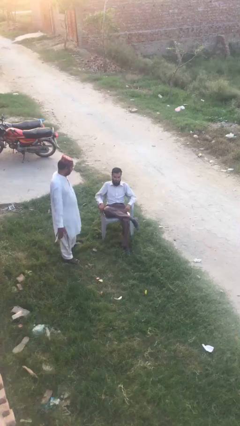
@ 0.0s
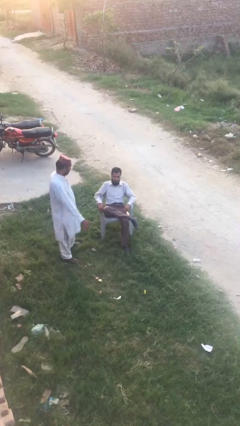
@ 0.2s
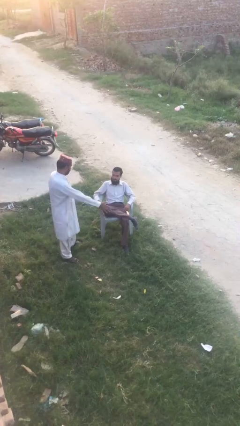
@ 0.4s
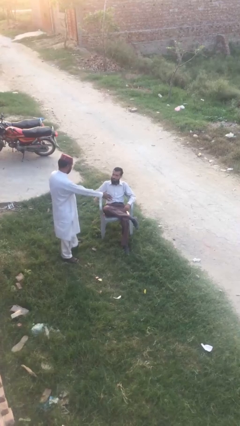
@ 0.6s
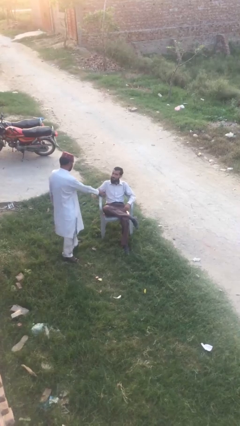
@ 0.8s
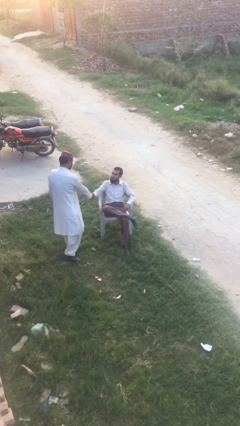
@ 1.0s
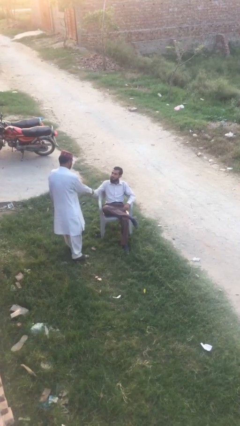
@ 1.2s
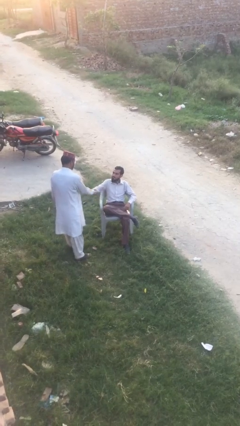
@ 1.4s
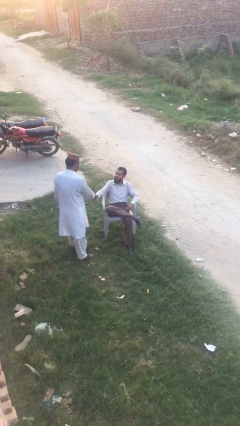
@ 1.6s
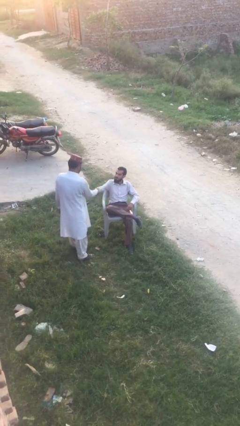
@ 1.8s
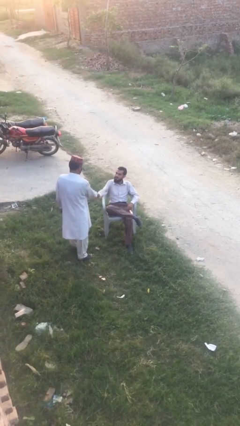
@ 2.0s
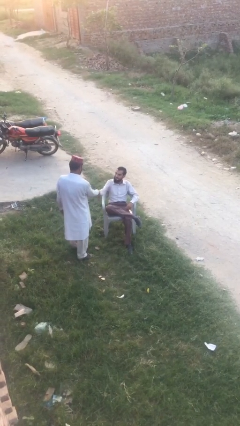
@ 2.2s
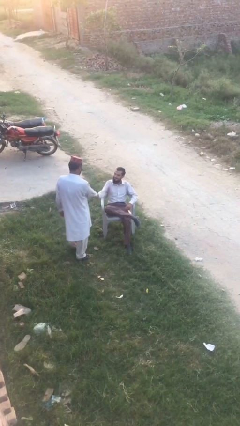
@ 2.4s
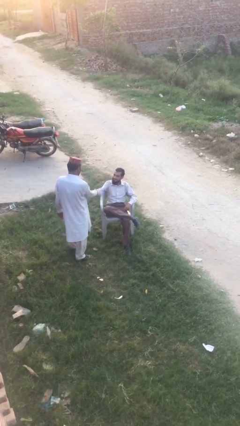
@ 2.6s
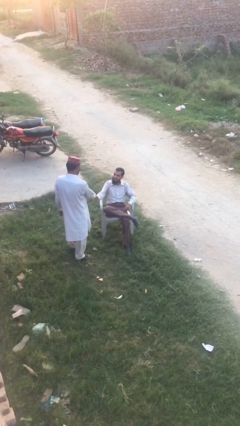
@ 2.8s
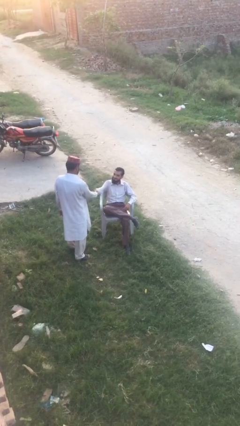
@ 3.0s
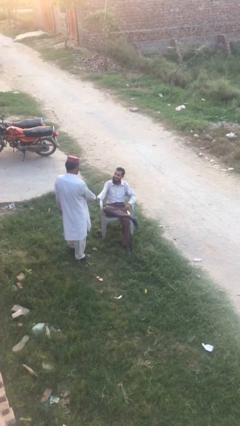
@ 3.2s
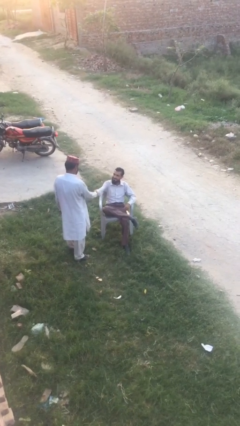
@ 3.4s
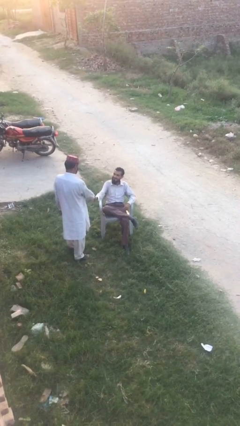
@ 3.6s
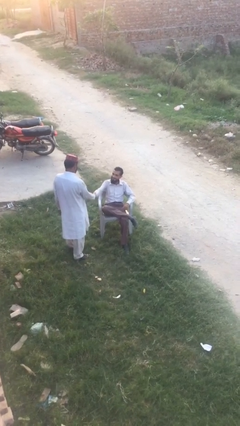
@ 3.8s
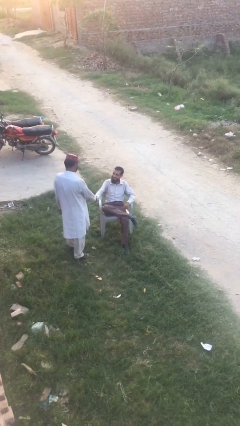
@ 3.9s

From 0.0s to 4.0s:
person shakes hand

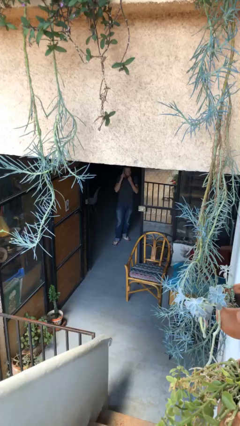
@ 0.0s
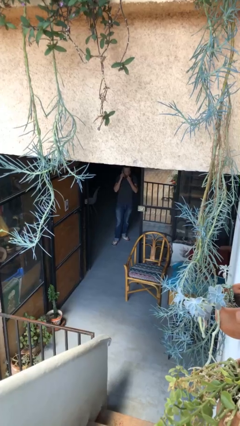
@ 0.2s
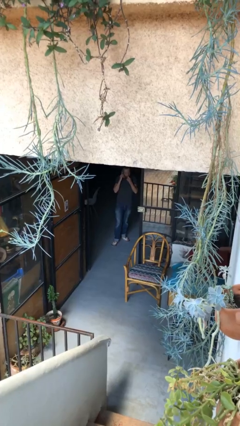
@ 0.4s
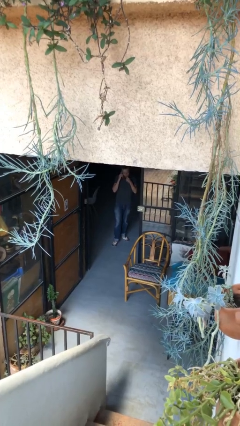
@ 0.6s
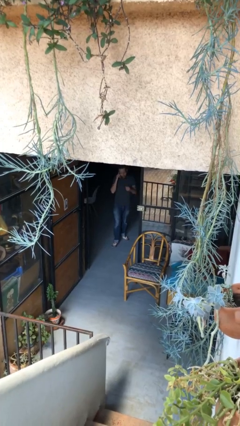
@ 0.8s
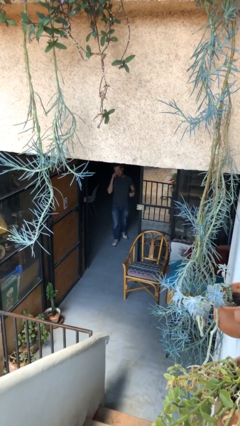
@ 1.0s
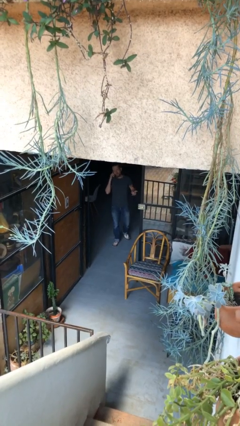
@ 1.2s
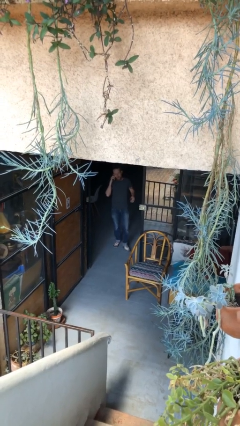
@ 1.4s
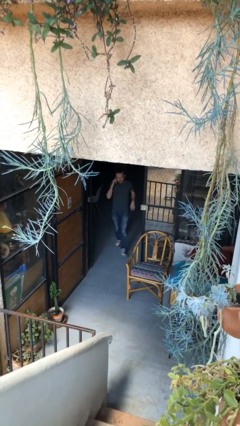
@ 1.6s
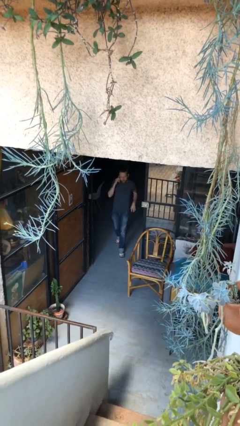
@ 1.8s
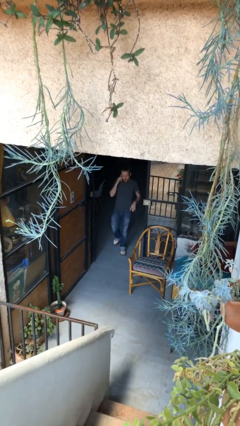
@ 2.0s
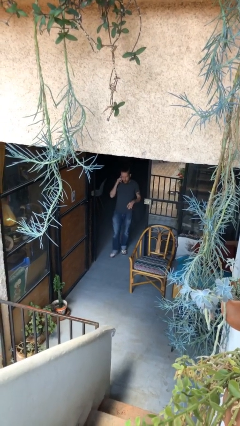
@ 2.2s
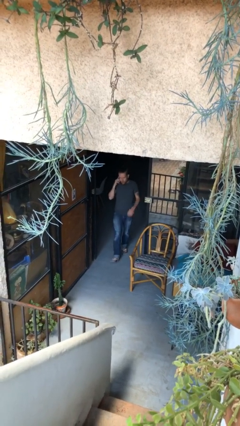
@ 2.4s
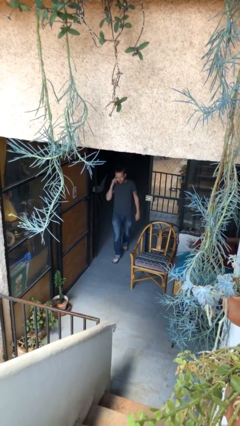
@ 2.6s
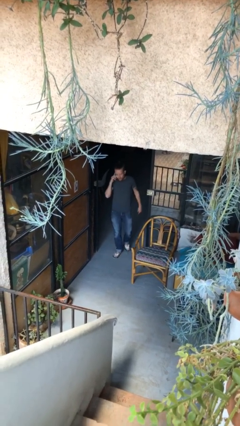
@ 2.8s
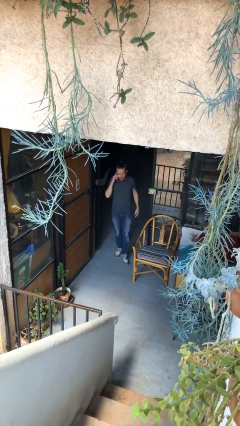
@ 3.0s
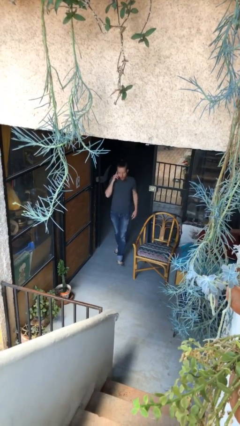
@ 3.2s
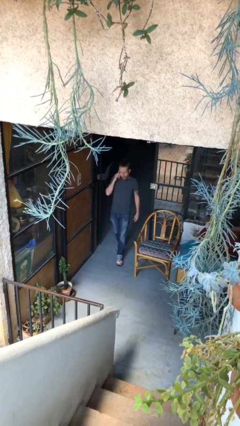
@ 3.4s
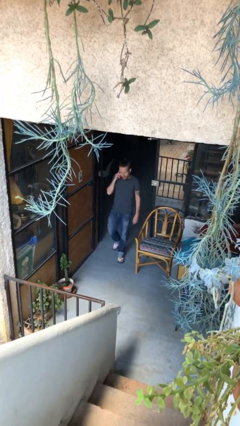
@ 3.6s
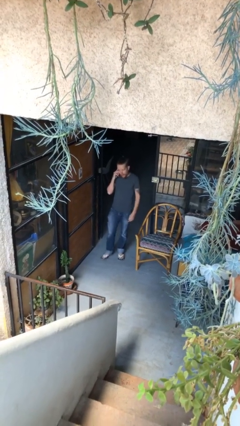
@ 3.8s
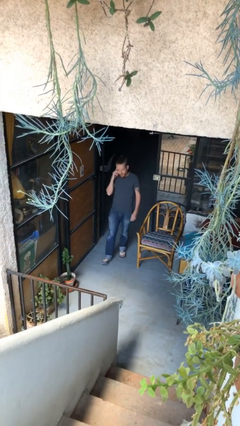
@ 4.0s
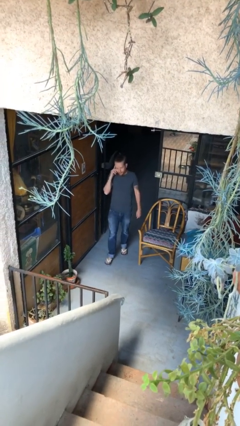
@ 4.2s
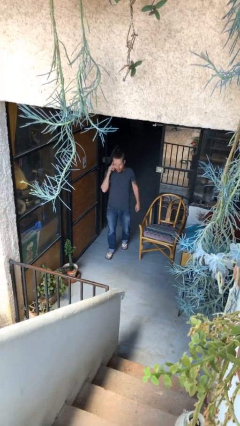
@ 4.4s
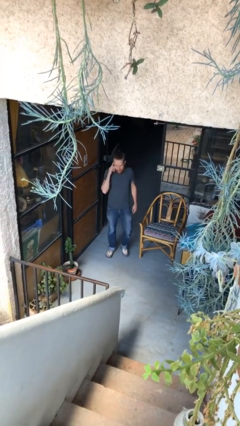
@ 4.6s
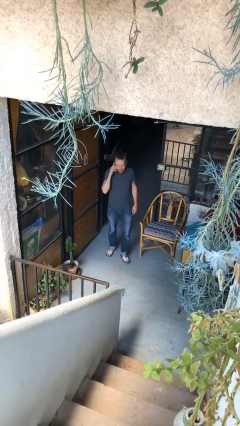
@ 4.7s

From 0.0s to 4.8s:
person enters scene through structure

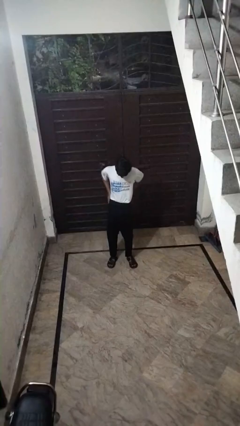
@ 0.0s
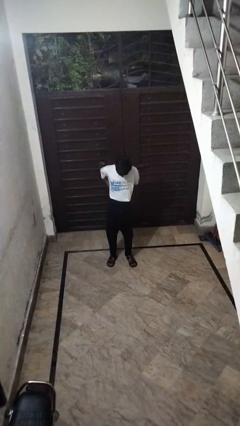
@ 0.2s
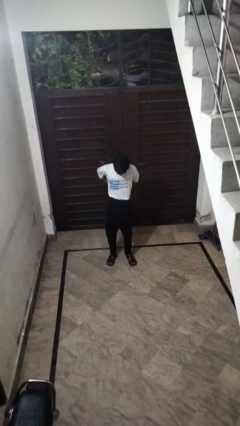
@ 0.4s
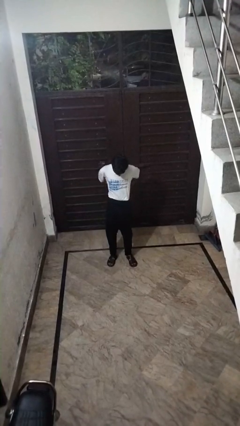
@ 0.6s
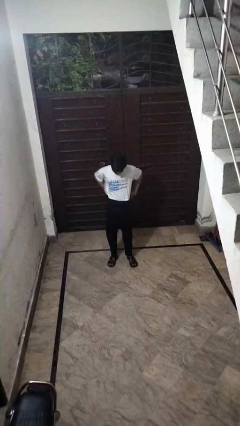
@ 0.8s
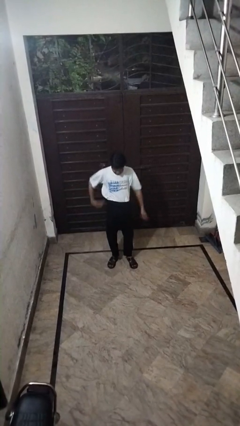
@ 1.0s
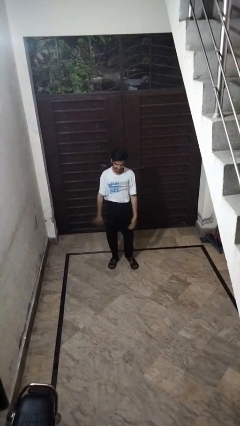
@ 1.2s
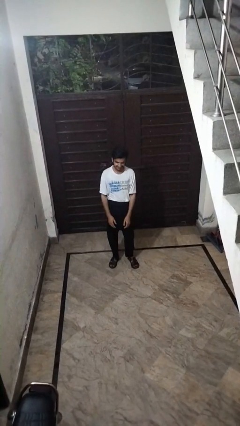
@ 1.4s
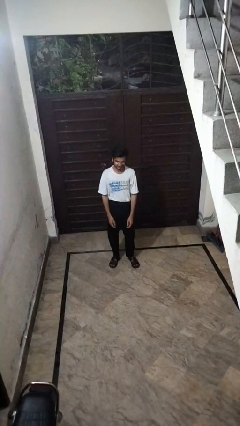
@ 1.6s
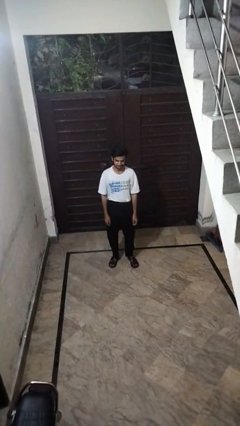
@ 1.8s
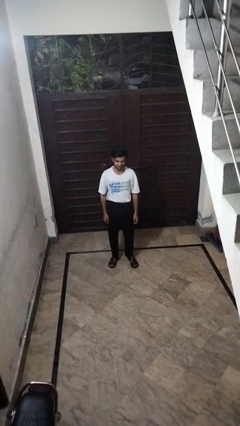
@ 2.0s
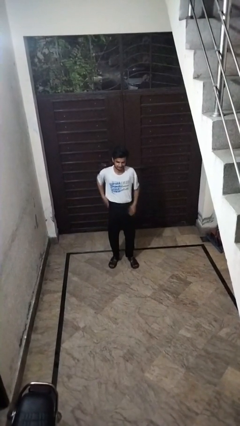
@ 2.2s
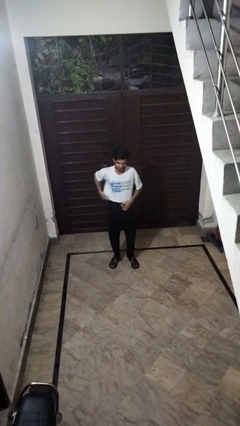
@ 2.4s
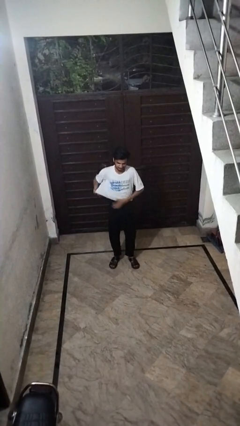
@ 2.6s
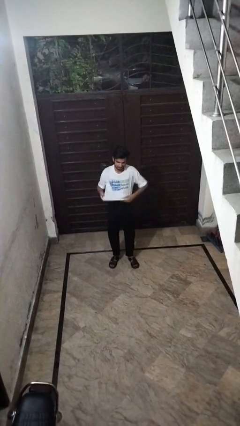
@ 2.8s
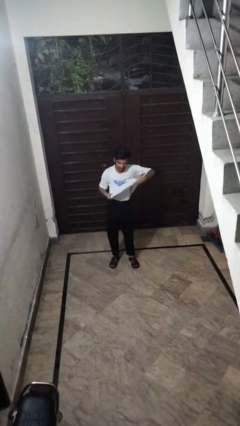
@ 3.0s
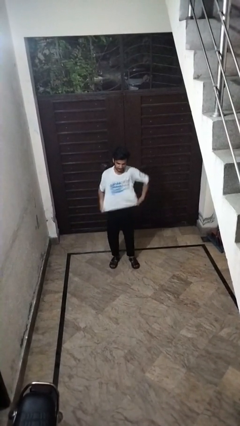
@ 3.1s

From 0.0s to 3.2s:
person unlocks door with keys

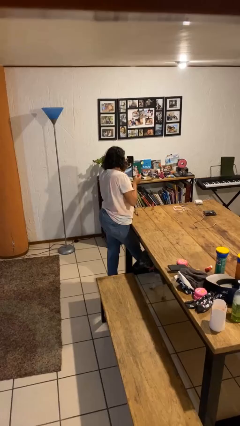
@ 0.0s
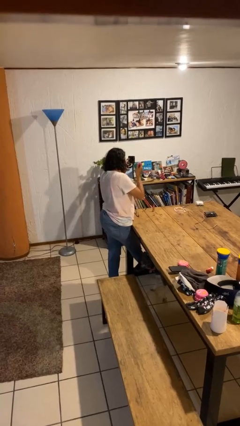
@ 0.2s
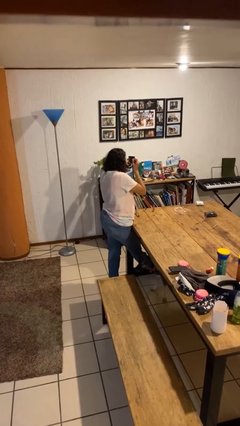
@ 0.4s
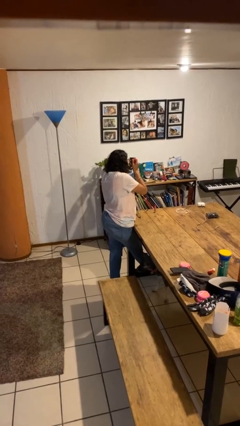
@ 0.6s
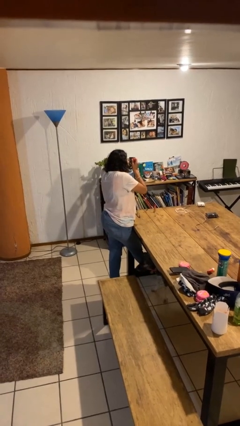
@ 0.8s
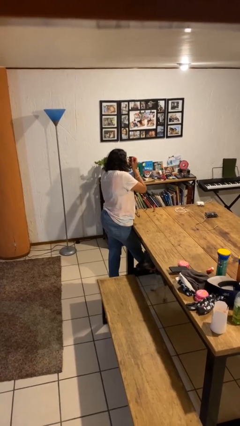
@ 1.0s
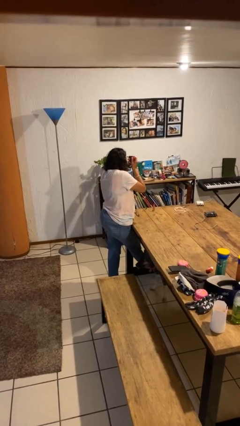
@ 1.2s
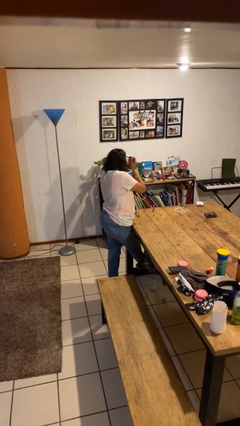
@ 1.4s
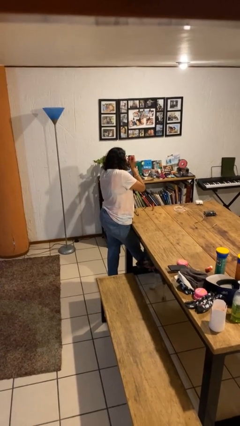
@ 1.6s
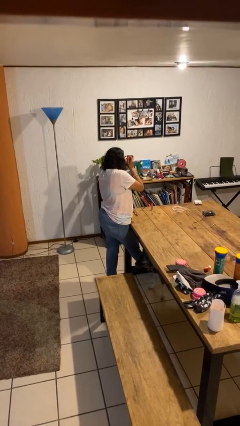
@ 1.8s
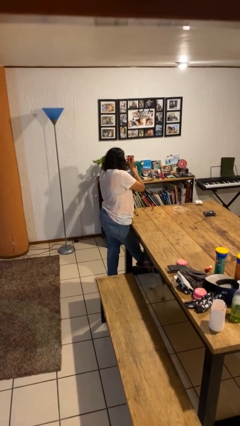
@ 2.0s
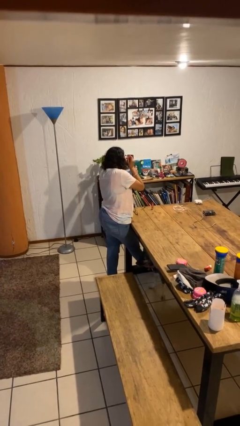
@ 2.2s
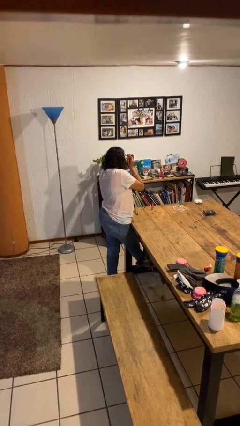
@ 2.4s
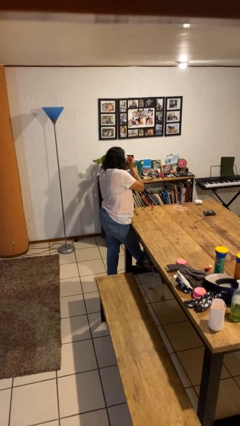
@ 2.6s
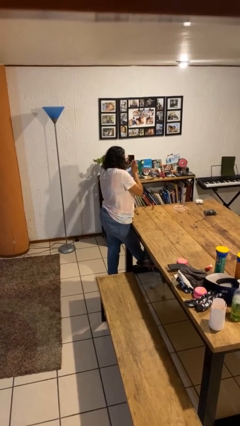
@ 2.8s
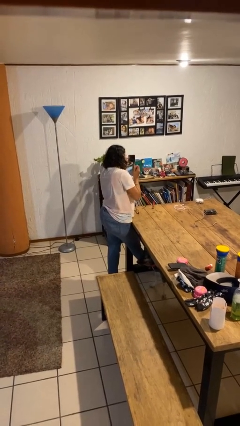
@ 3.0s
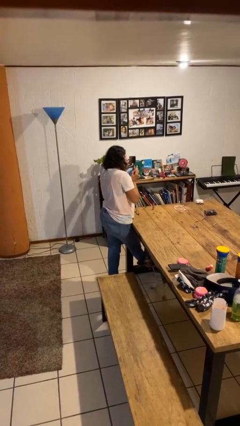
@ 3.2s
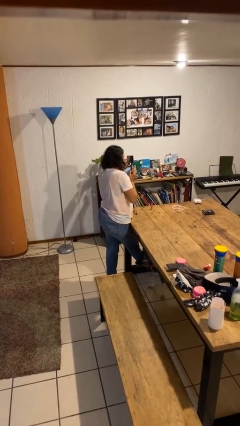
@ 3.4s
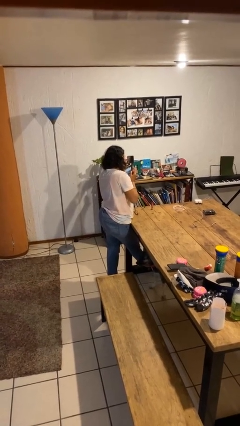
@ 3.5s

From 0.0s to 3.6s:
person applies eye makeup

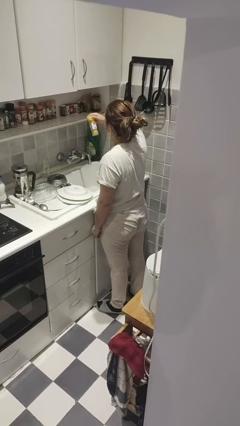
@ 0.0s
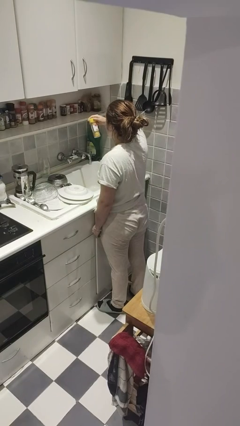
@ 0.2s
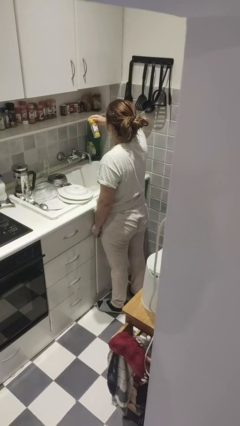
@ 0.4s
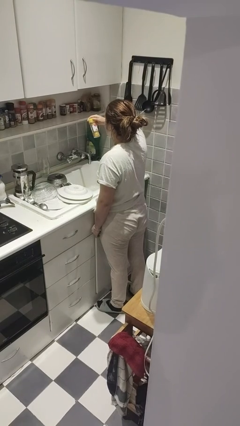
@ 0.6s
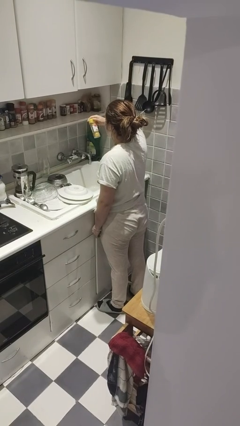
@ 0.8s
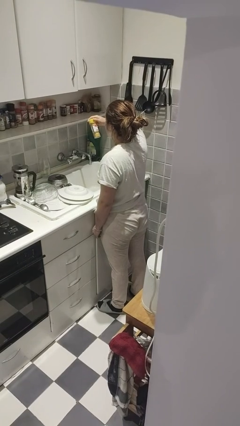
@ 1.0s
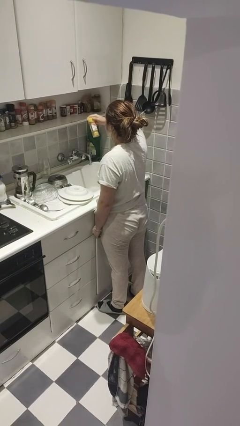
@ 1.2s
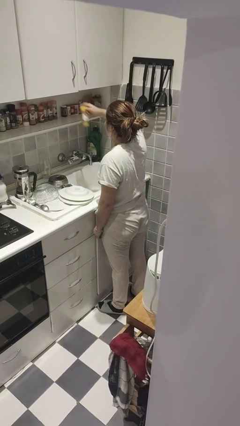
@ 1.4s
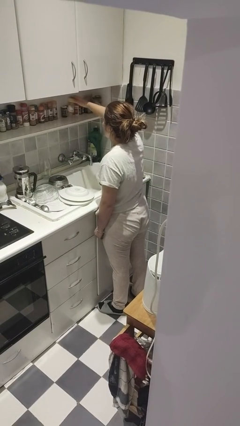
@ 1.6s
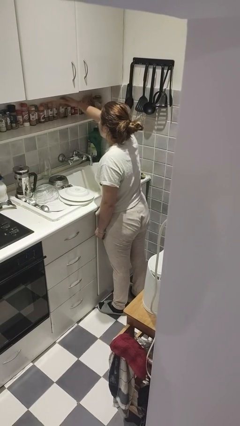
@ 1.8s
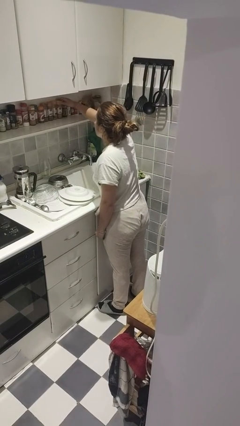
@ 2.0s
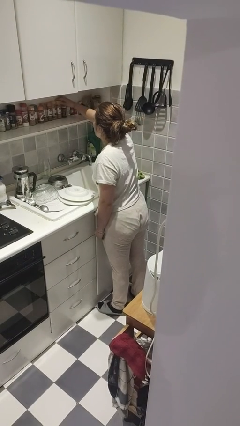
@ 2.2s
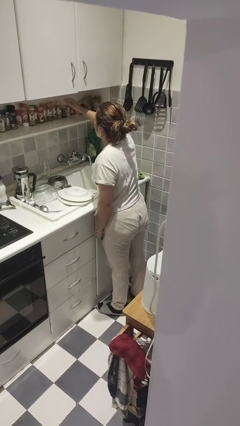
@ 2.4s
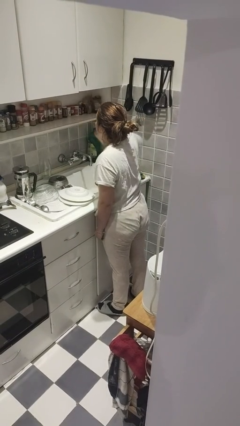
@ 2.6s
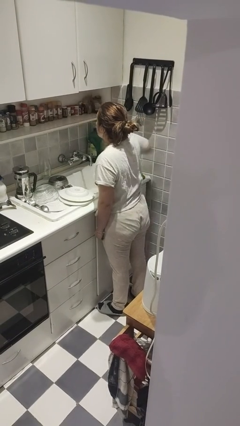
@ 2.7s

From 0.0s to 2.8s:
person puts down object on countertop
